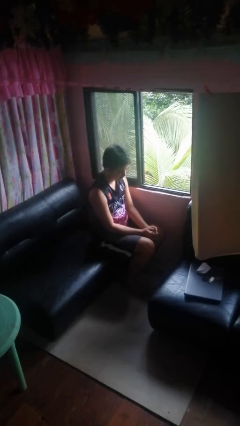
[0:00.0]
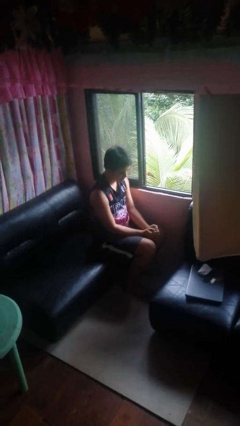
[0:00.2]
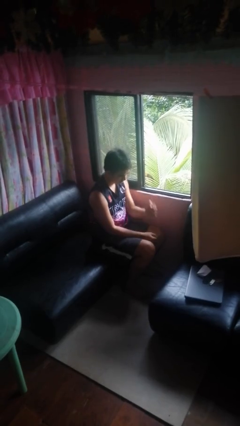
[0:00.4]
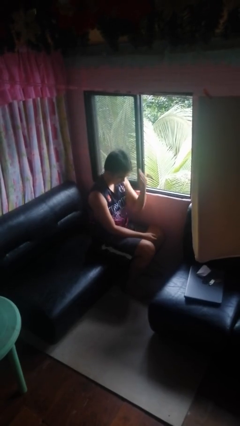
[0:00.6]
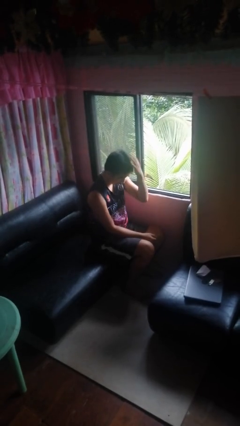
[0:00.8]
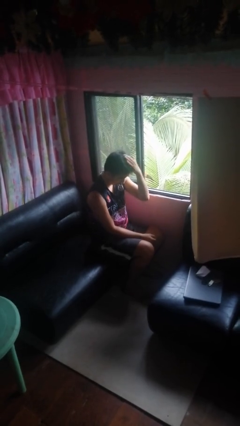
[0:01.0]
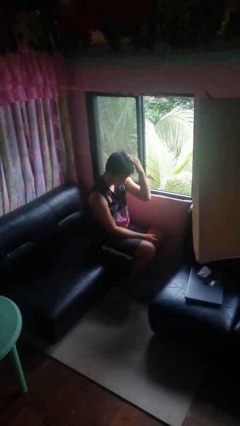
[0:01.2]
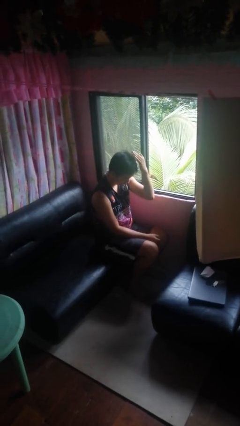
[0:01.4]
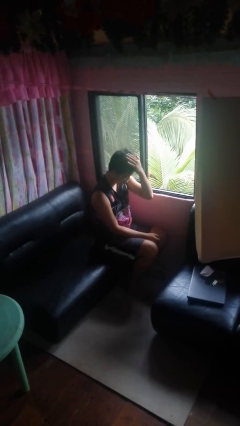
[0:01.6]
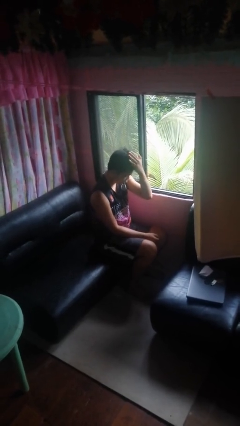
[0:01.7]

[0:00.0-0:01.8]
person pats head

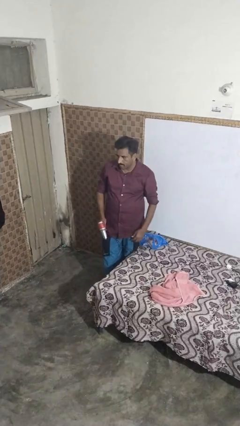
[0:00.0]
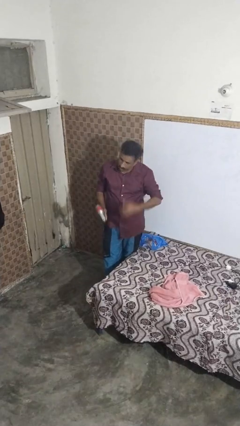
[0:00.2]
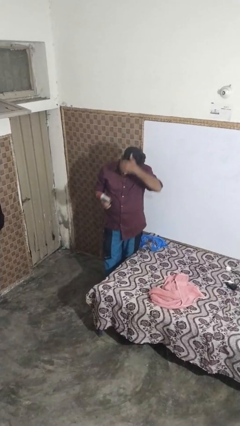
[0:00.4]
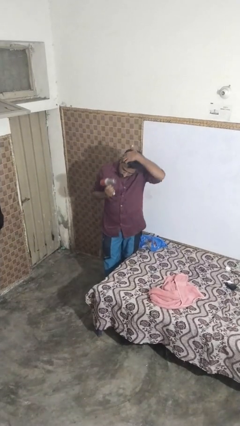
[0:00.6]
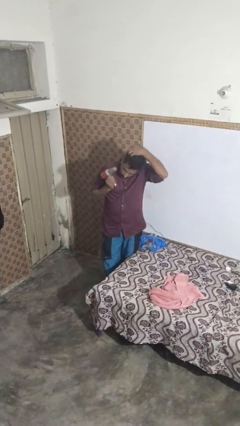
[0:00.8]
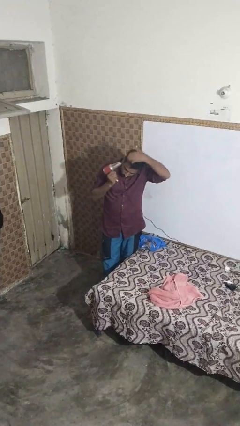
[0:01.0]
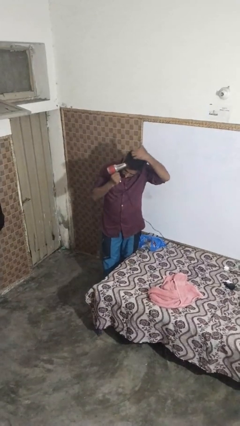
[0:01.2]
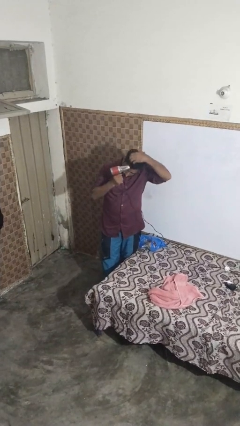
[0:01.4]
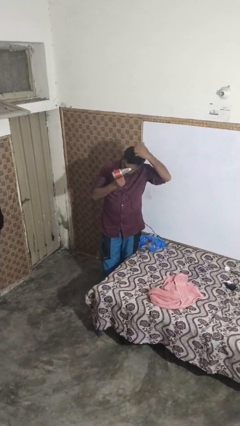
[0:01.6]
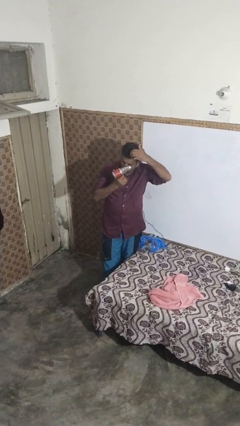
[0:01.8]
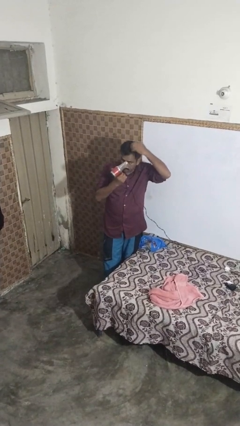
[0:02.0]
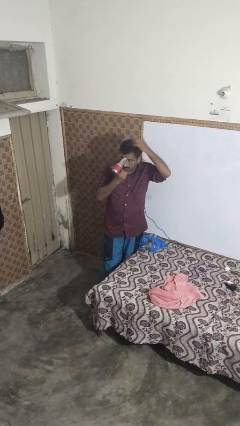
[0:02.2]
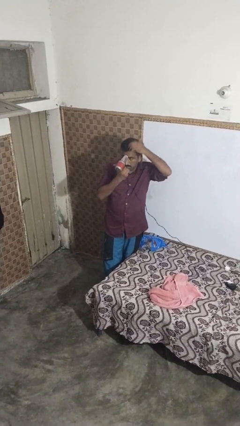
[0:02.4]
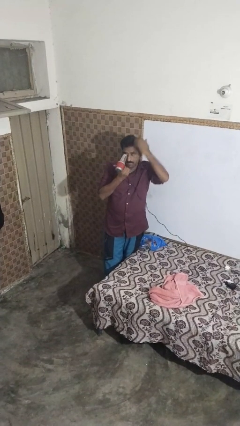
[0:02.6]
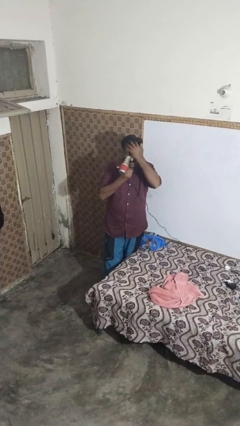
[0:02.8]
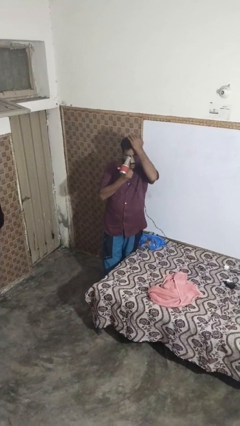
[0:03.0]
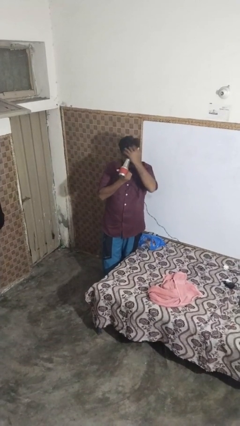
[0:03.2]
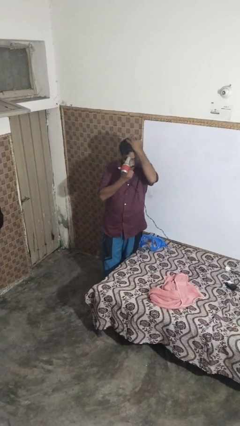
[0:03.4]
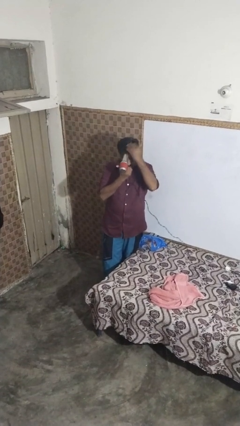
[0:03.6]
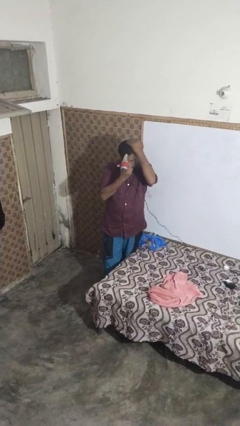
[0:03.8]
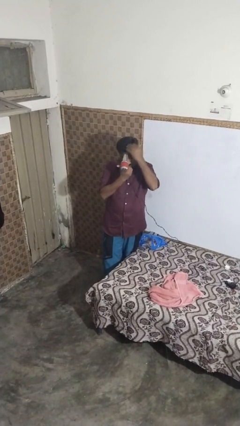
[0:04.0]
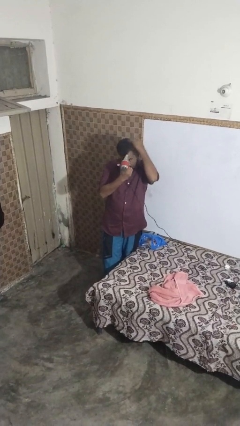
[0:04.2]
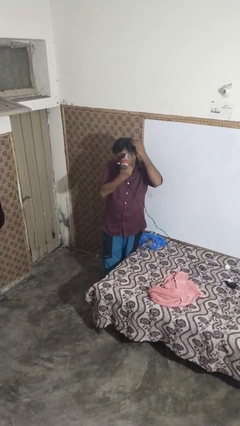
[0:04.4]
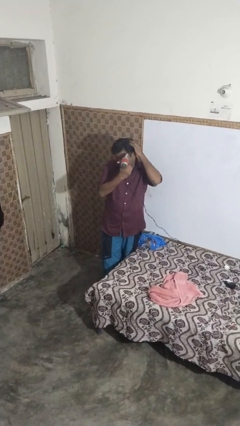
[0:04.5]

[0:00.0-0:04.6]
person dries hair with hairdryer

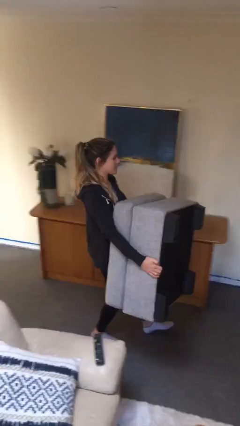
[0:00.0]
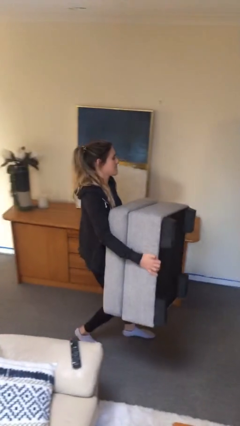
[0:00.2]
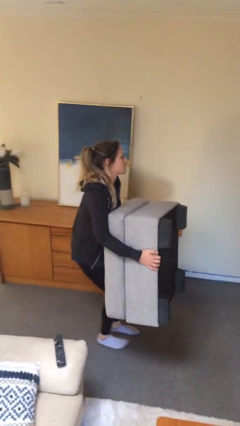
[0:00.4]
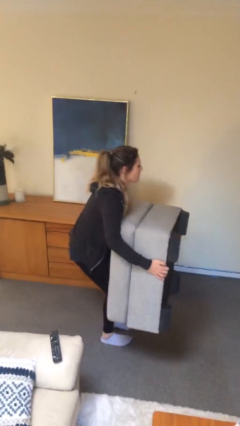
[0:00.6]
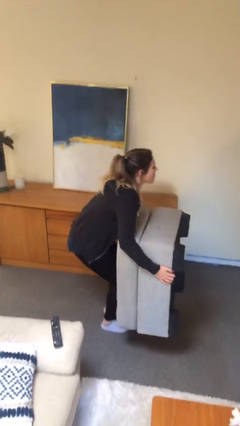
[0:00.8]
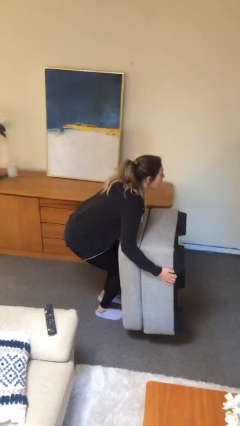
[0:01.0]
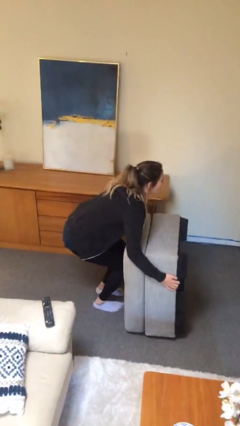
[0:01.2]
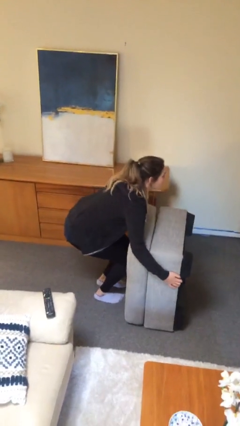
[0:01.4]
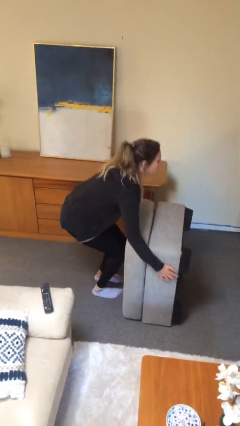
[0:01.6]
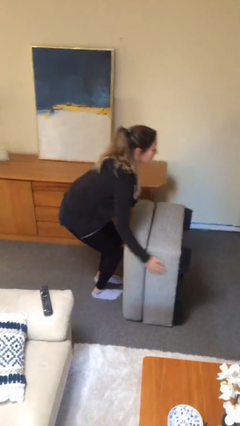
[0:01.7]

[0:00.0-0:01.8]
person puts down object on floor

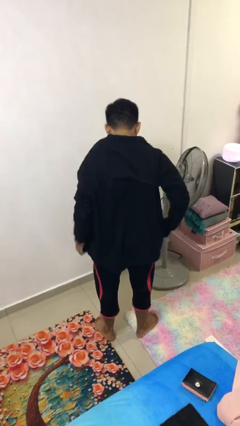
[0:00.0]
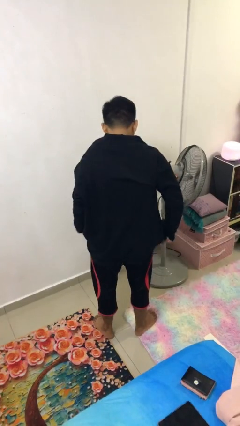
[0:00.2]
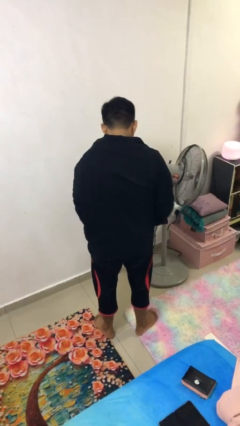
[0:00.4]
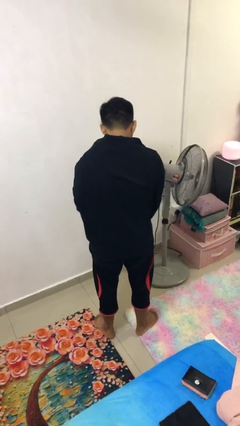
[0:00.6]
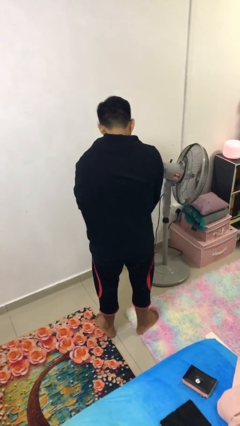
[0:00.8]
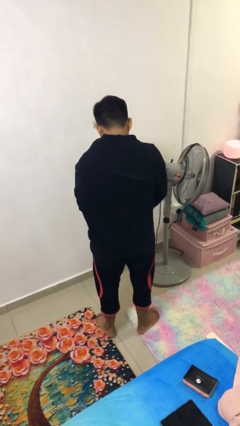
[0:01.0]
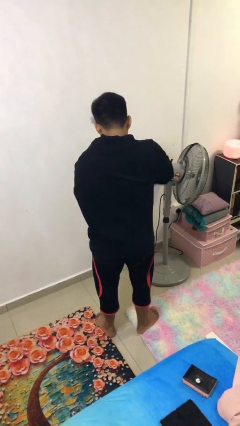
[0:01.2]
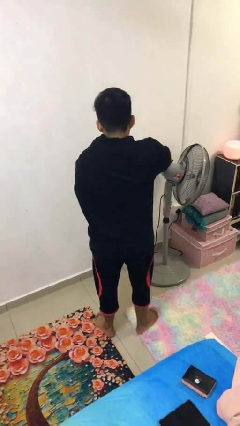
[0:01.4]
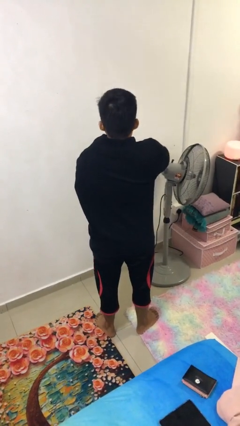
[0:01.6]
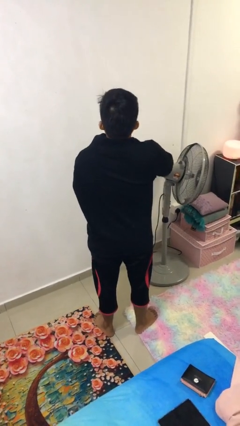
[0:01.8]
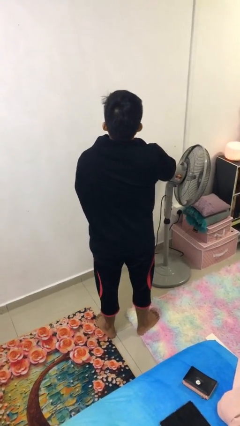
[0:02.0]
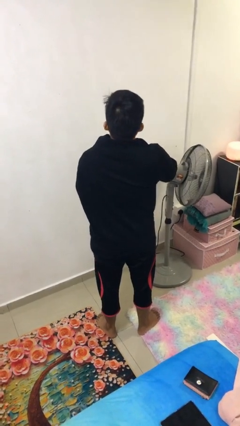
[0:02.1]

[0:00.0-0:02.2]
person zips up jacket

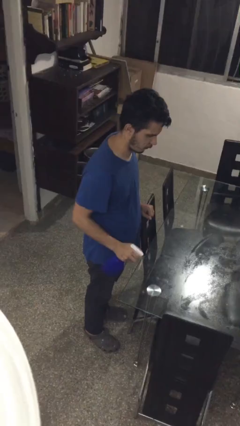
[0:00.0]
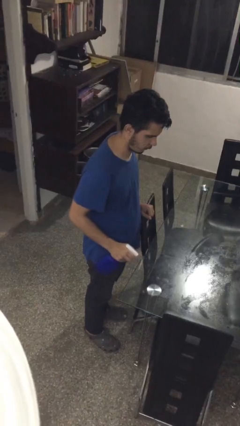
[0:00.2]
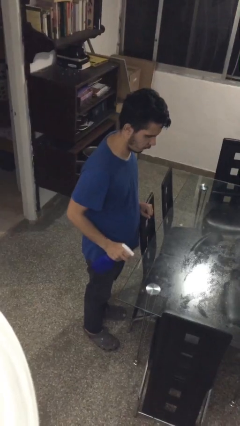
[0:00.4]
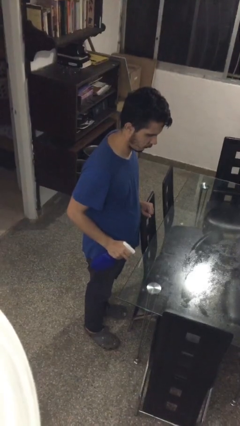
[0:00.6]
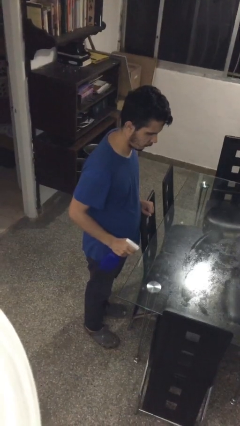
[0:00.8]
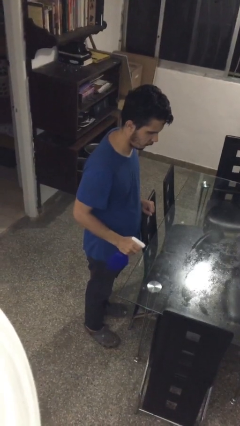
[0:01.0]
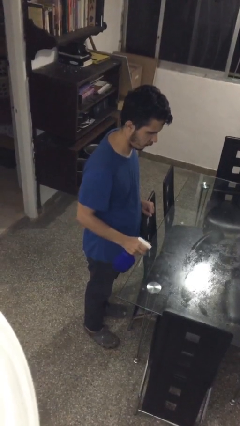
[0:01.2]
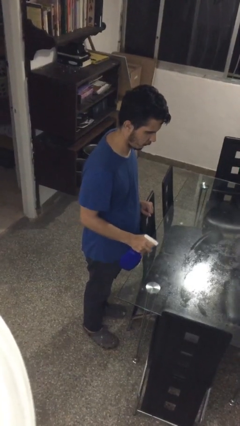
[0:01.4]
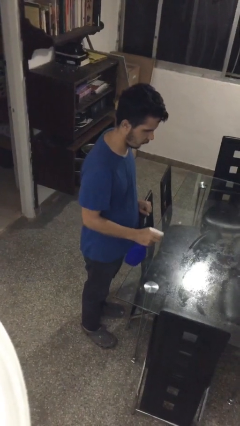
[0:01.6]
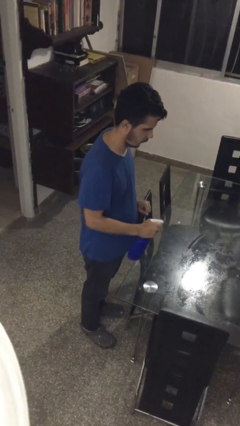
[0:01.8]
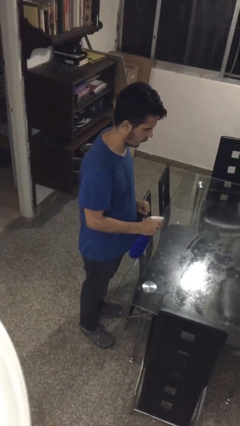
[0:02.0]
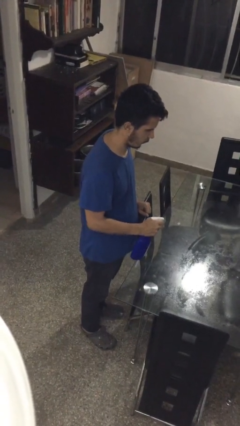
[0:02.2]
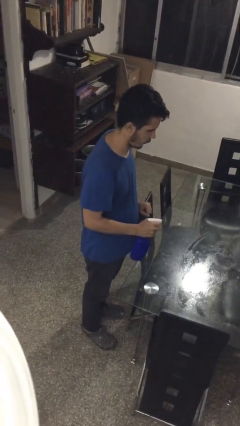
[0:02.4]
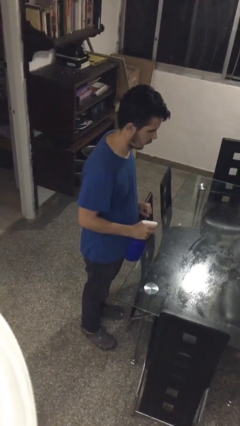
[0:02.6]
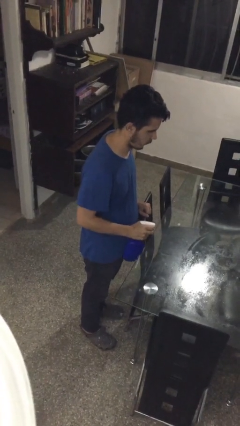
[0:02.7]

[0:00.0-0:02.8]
person sprays from bottle

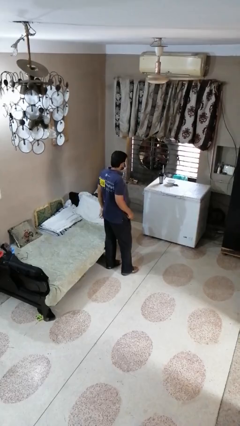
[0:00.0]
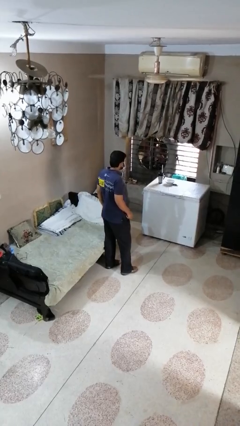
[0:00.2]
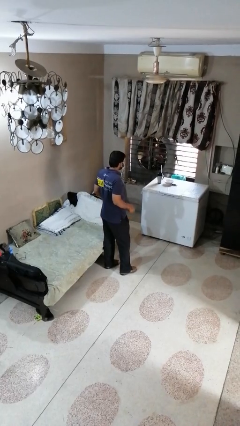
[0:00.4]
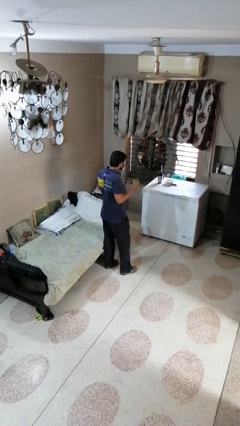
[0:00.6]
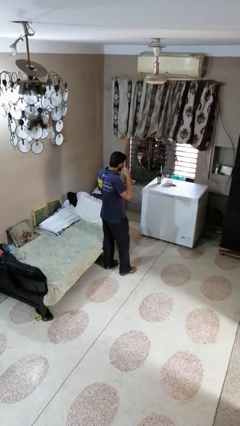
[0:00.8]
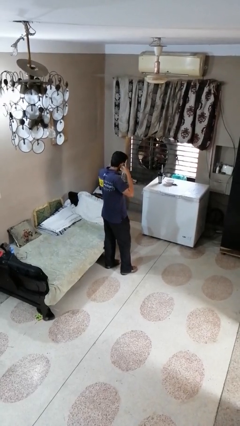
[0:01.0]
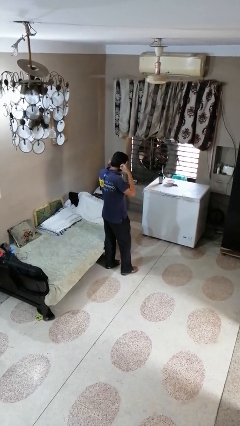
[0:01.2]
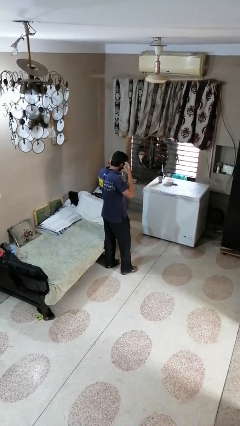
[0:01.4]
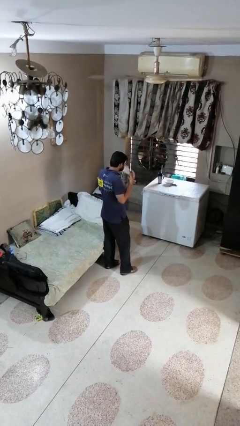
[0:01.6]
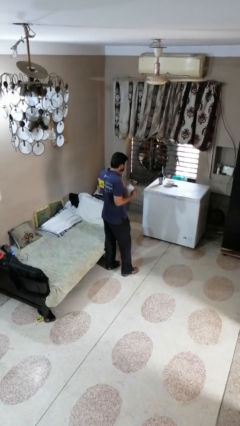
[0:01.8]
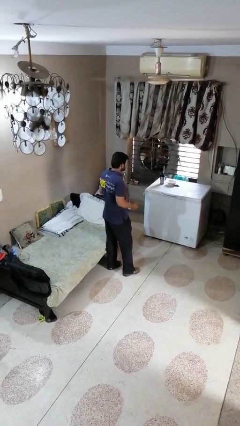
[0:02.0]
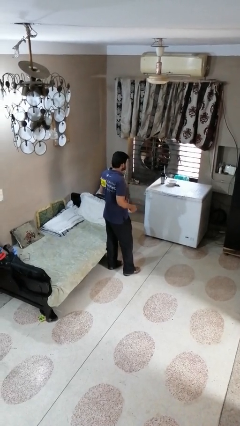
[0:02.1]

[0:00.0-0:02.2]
person takes off facemask

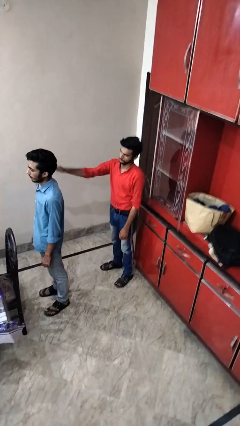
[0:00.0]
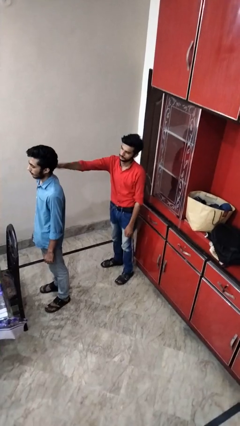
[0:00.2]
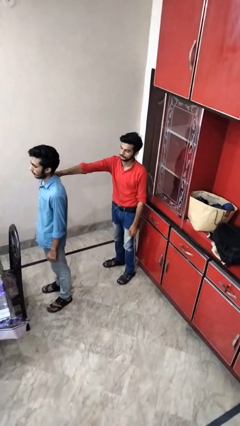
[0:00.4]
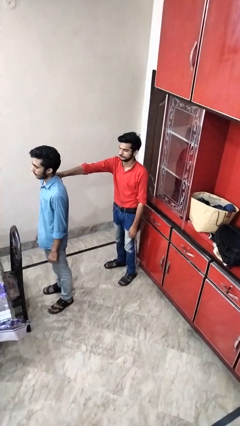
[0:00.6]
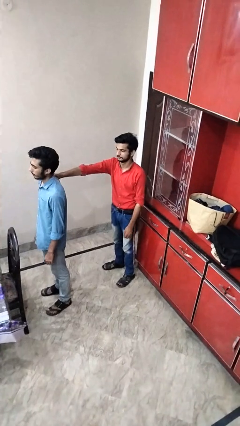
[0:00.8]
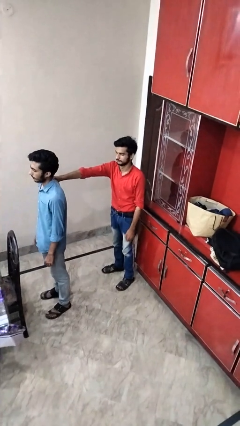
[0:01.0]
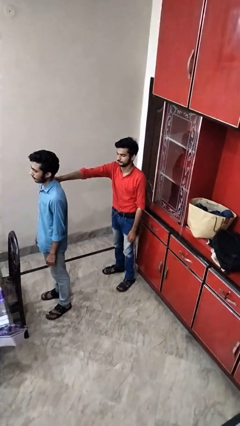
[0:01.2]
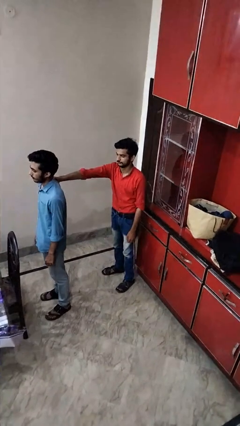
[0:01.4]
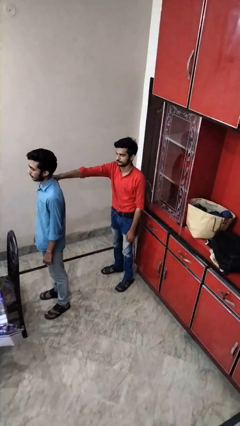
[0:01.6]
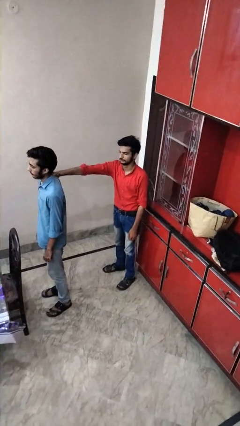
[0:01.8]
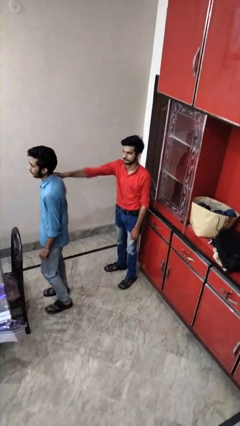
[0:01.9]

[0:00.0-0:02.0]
person grabs person by shoulder
